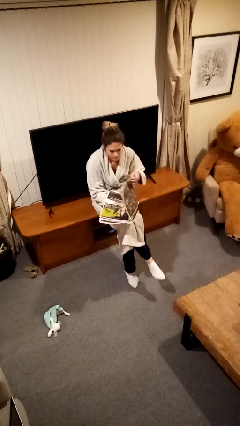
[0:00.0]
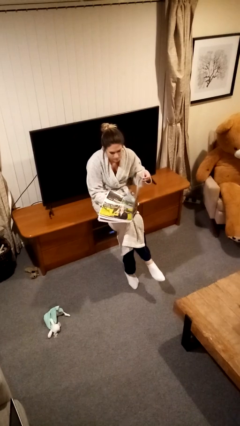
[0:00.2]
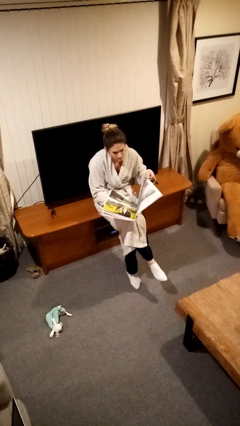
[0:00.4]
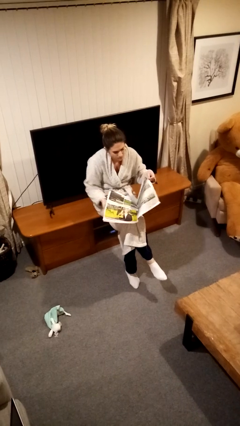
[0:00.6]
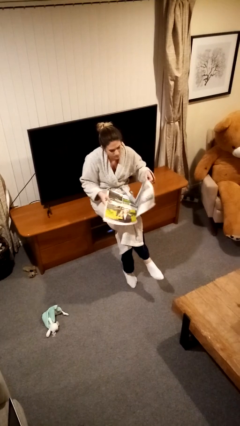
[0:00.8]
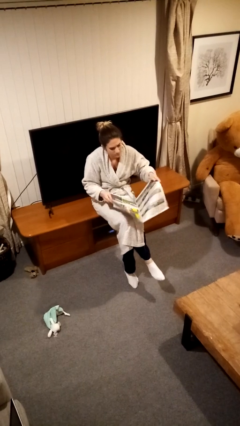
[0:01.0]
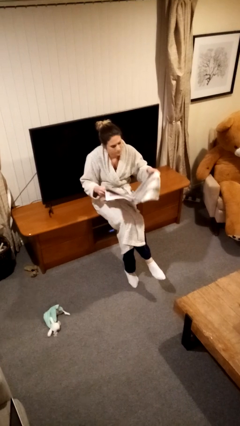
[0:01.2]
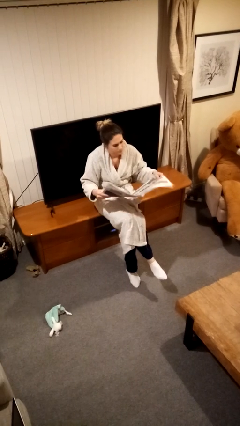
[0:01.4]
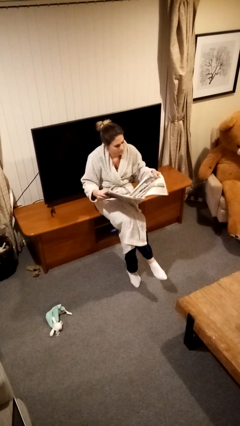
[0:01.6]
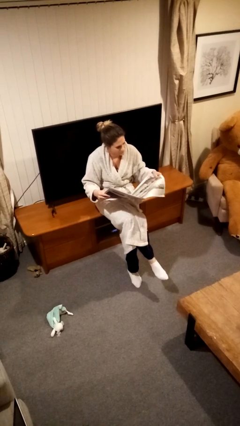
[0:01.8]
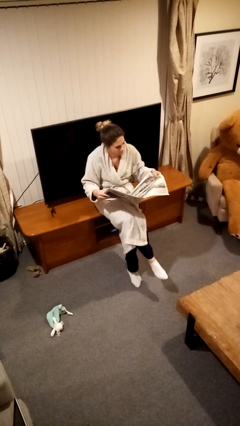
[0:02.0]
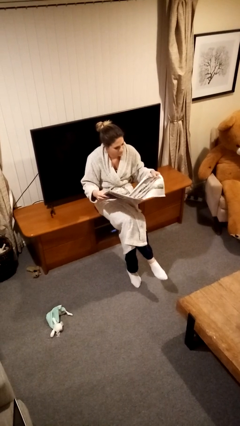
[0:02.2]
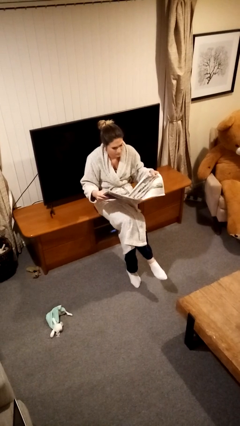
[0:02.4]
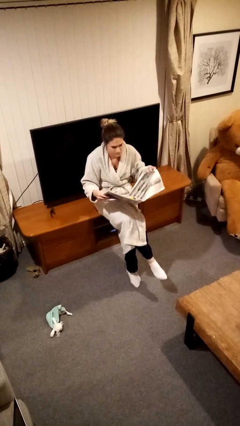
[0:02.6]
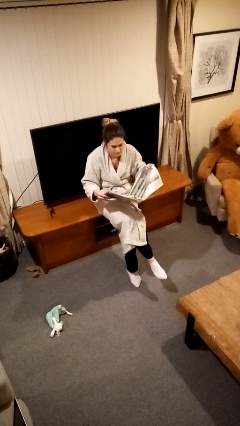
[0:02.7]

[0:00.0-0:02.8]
person reads newspaper

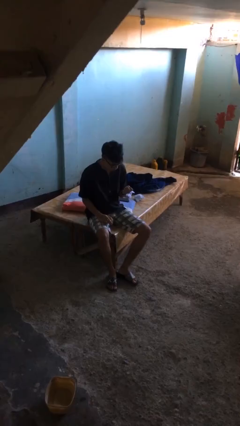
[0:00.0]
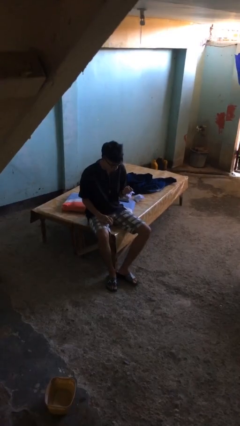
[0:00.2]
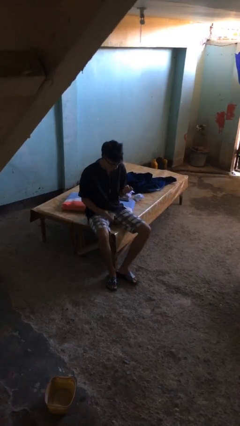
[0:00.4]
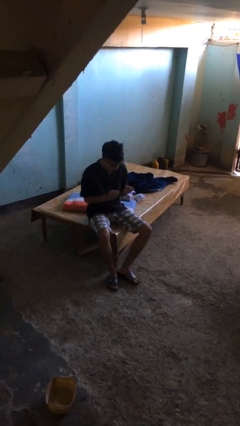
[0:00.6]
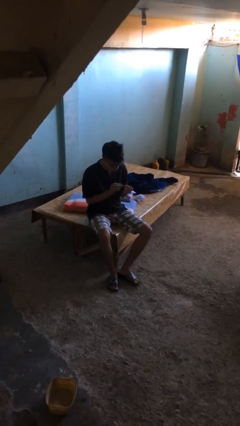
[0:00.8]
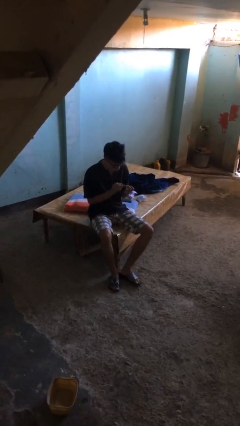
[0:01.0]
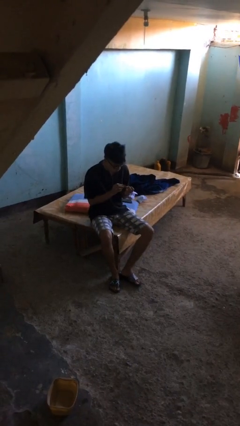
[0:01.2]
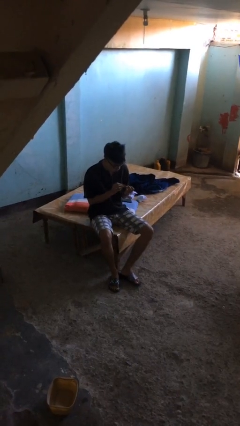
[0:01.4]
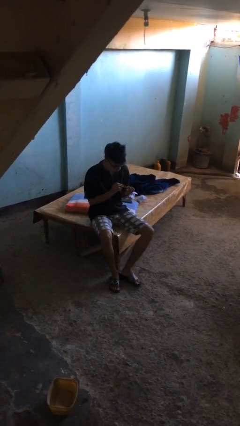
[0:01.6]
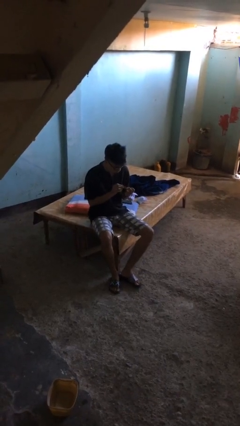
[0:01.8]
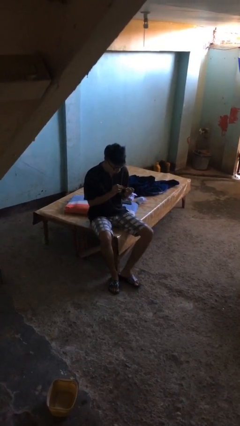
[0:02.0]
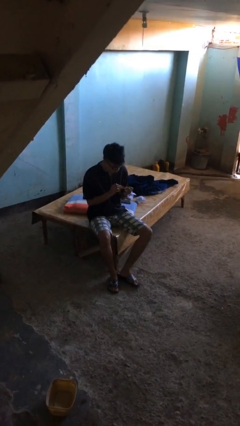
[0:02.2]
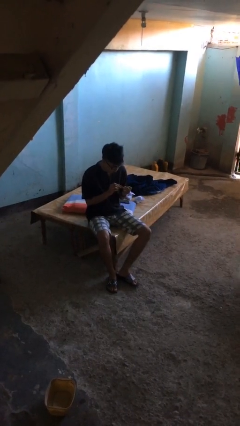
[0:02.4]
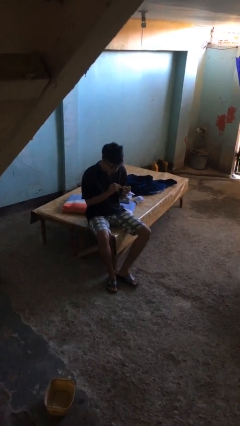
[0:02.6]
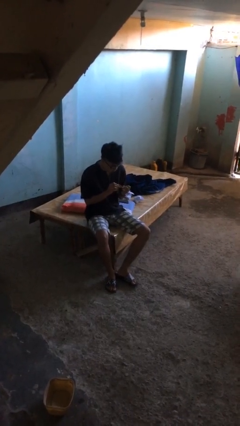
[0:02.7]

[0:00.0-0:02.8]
person clips fingernails

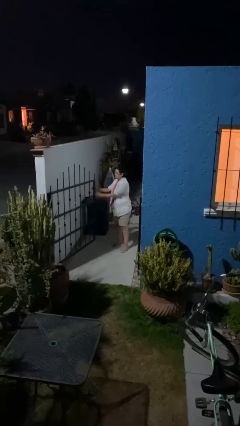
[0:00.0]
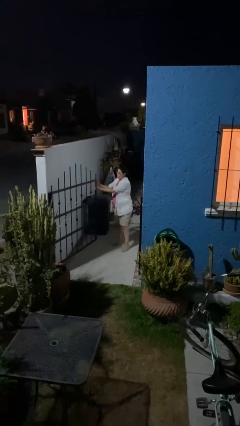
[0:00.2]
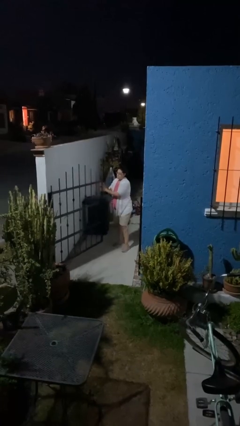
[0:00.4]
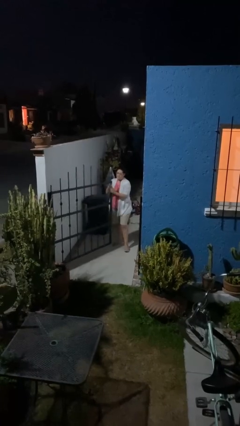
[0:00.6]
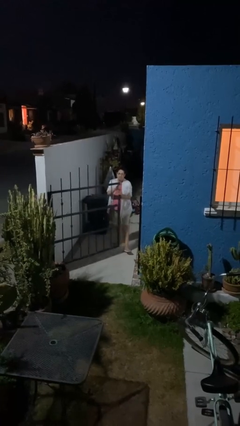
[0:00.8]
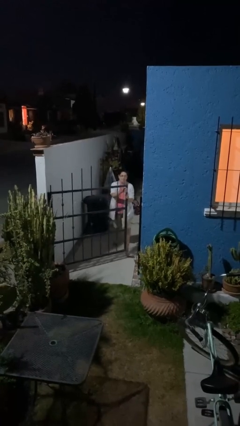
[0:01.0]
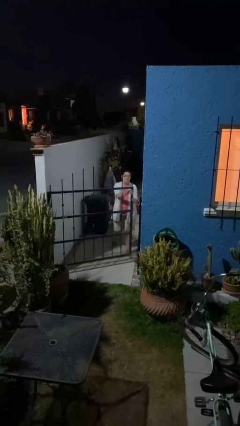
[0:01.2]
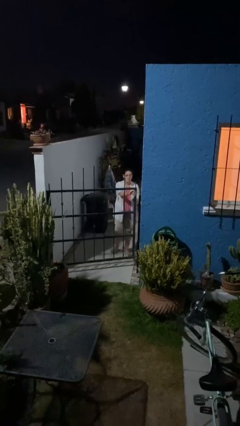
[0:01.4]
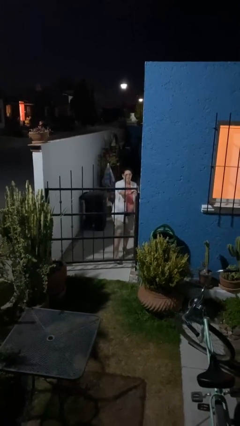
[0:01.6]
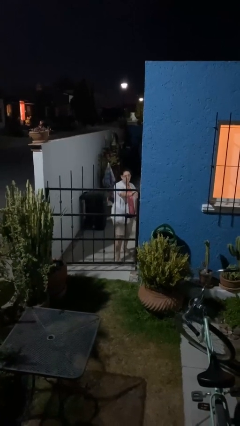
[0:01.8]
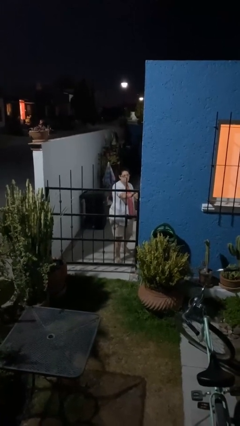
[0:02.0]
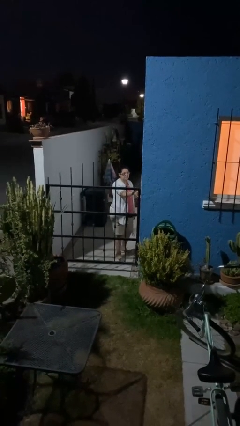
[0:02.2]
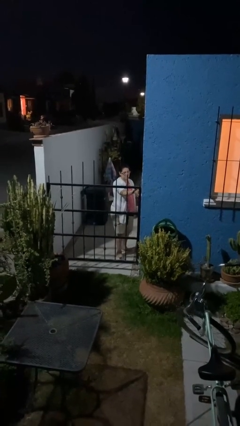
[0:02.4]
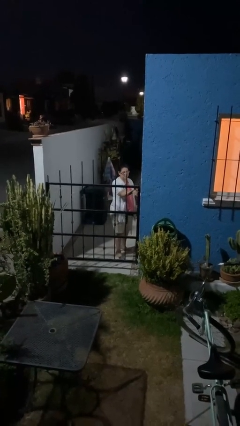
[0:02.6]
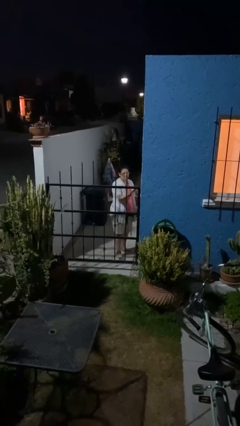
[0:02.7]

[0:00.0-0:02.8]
person closes facility door

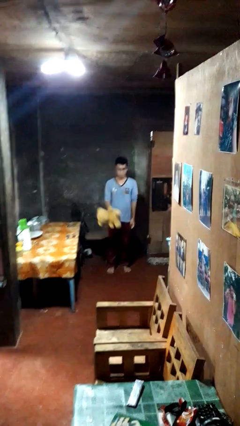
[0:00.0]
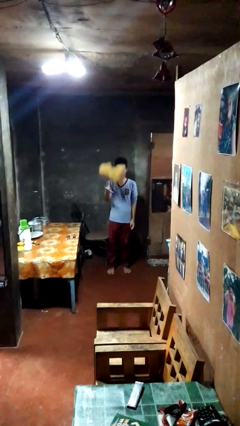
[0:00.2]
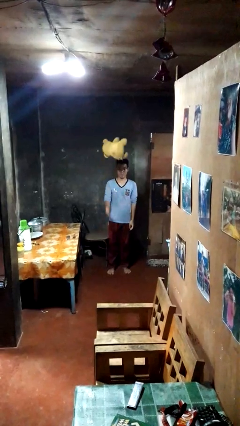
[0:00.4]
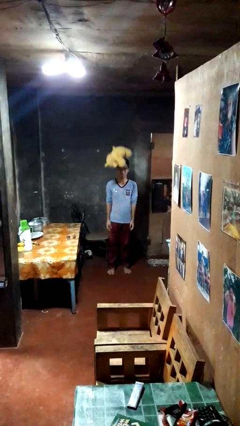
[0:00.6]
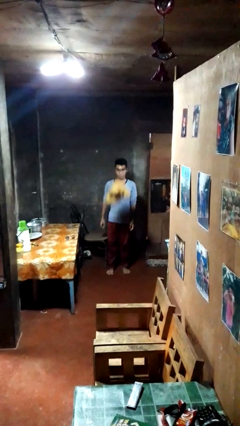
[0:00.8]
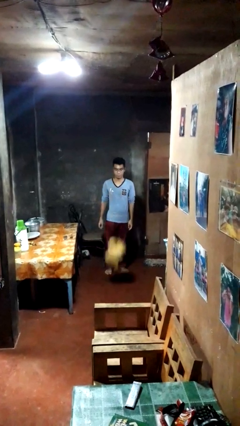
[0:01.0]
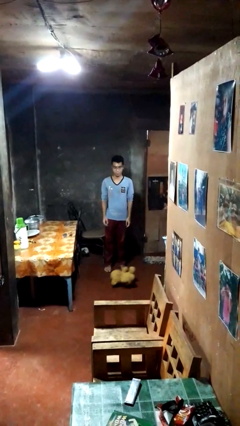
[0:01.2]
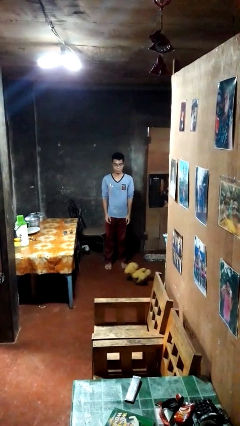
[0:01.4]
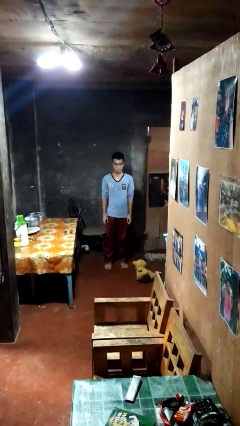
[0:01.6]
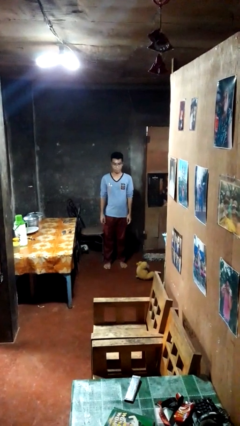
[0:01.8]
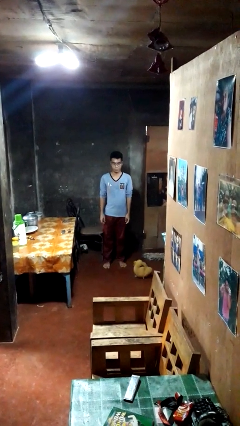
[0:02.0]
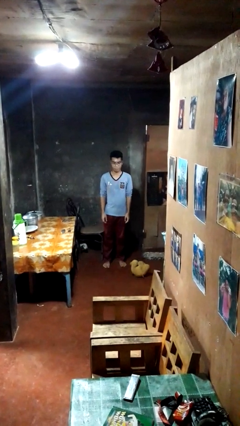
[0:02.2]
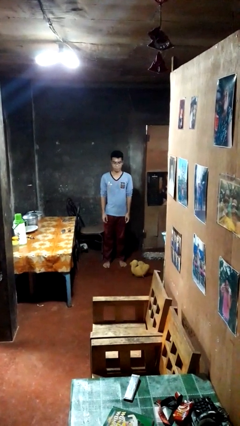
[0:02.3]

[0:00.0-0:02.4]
person throws object into air

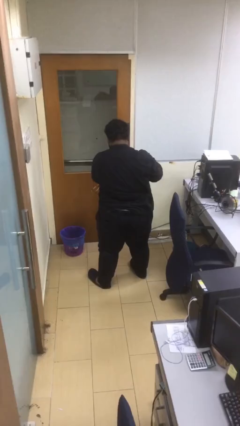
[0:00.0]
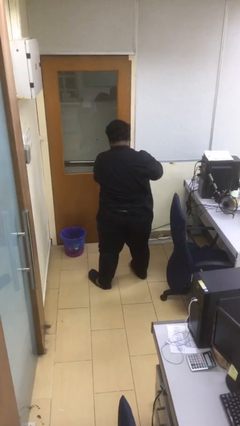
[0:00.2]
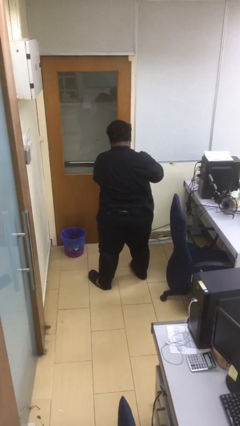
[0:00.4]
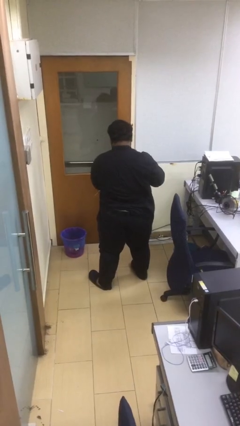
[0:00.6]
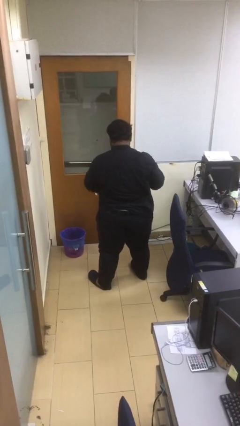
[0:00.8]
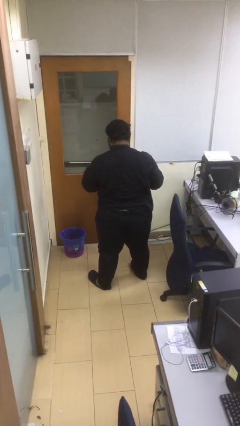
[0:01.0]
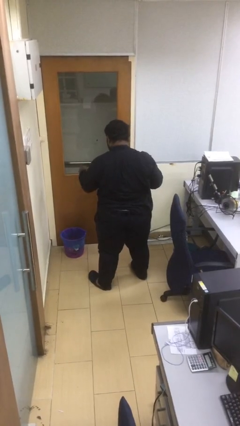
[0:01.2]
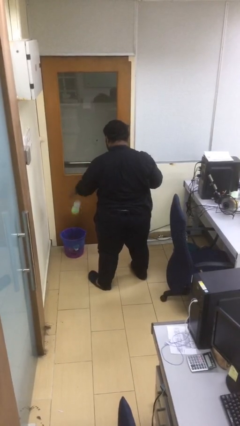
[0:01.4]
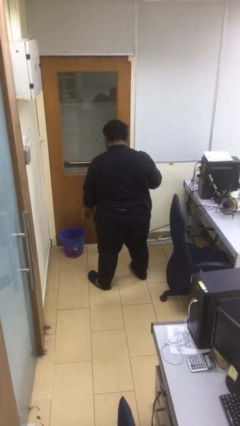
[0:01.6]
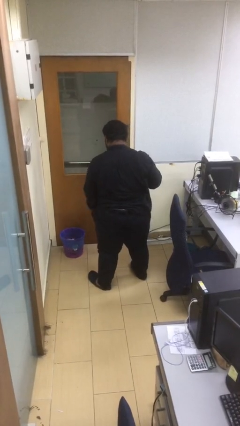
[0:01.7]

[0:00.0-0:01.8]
person discards trash

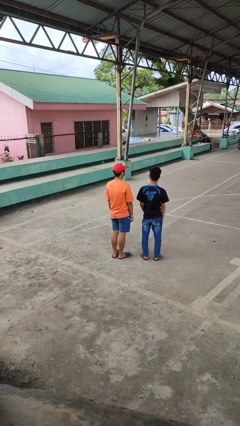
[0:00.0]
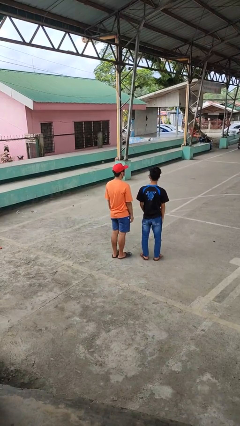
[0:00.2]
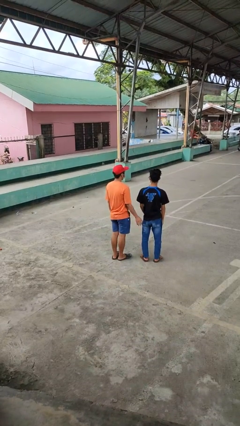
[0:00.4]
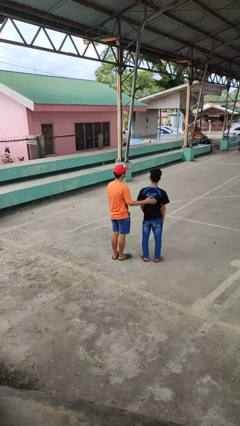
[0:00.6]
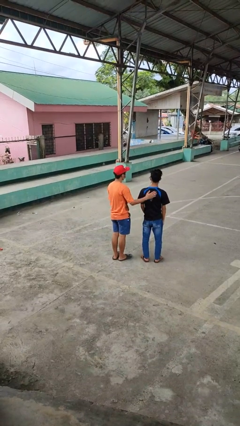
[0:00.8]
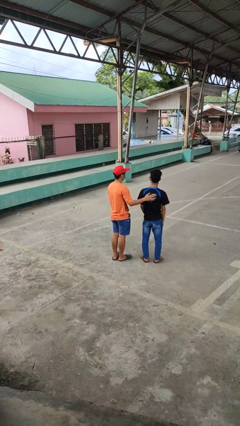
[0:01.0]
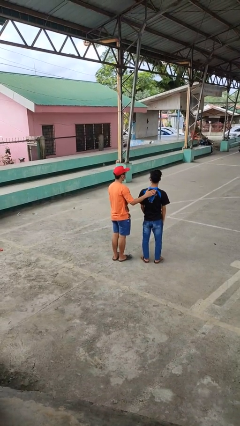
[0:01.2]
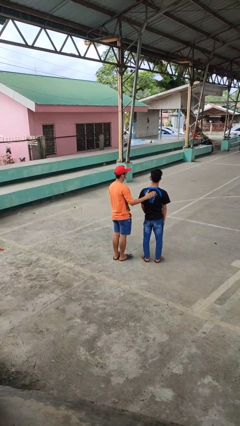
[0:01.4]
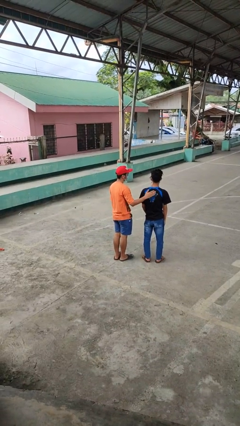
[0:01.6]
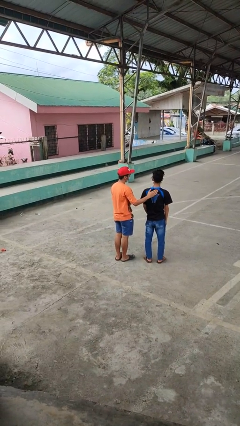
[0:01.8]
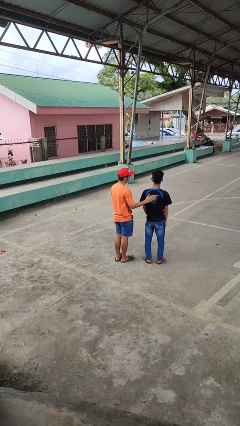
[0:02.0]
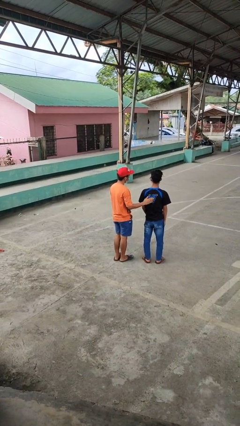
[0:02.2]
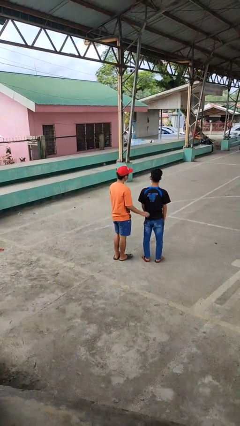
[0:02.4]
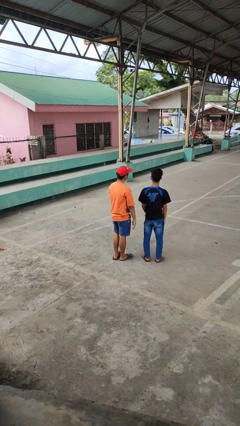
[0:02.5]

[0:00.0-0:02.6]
person touches back of person

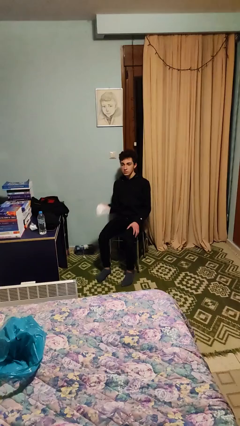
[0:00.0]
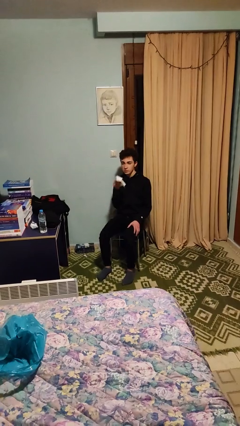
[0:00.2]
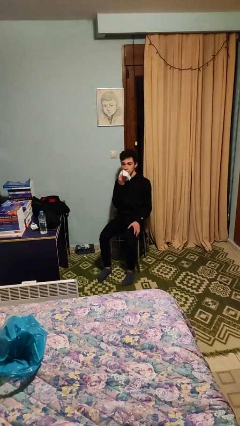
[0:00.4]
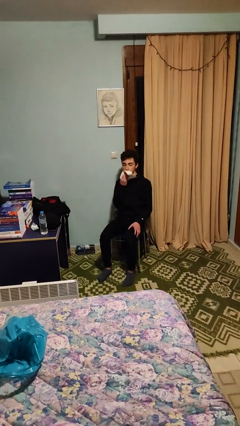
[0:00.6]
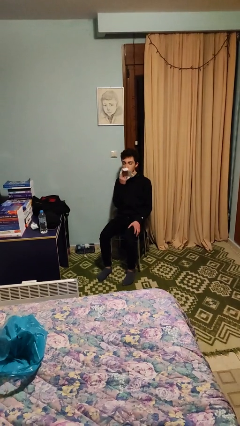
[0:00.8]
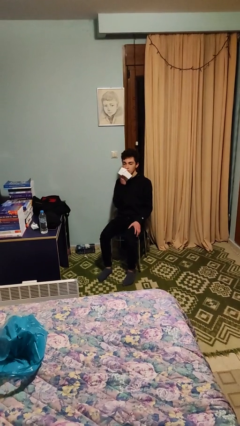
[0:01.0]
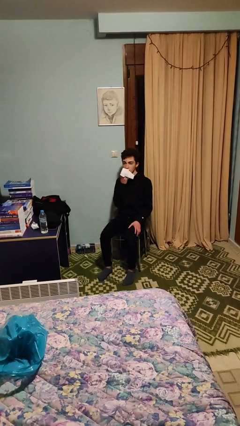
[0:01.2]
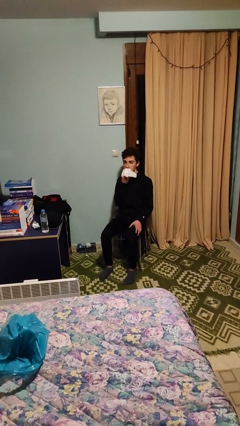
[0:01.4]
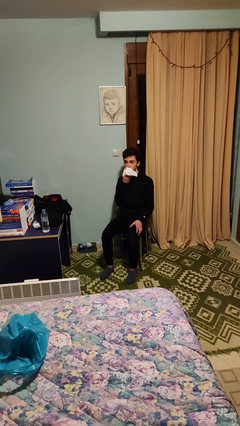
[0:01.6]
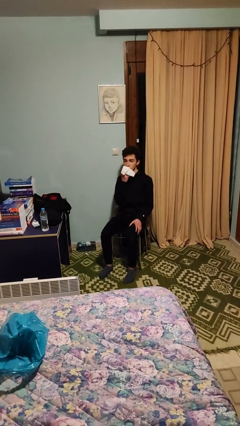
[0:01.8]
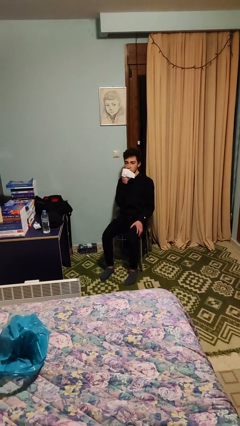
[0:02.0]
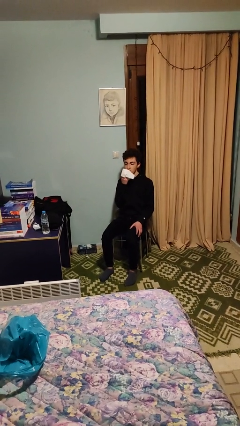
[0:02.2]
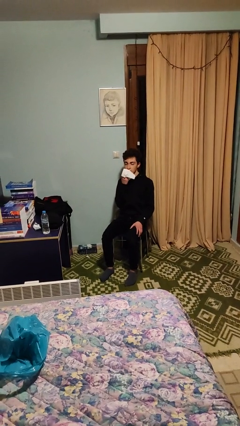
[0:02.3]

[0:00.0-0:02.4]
person wipes mouth with napkin
